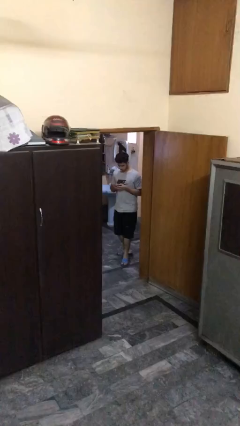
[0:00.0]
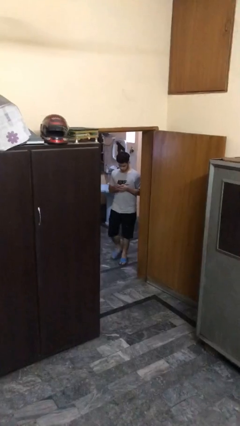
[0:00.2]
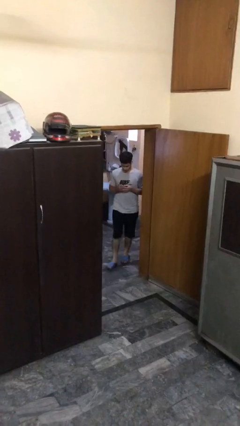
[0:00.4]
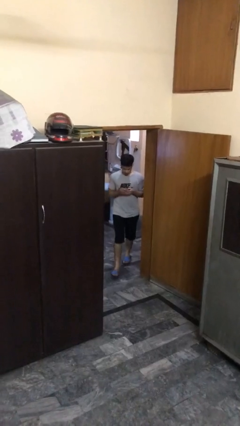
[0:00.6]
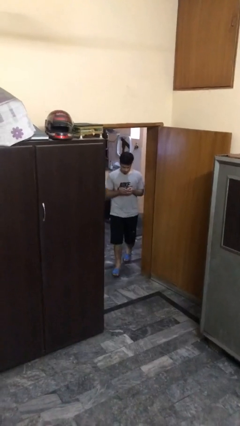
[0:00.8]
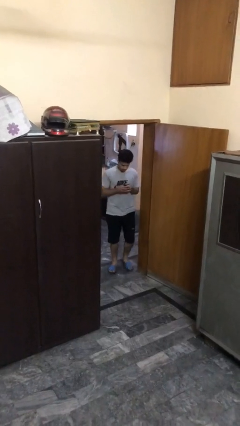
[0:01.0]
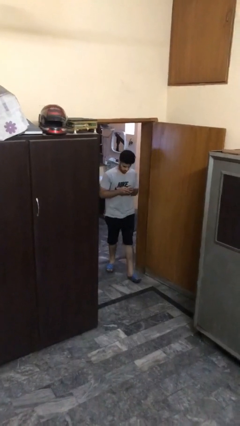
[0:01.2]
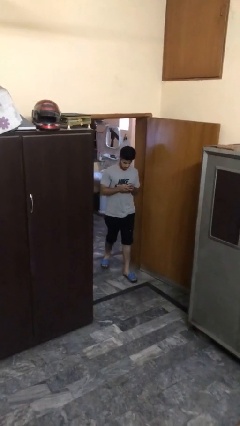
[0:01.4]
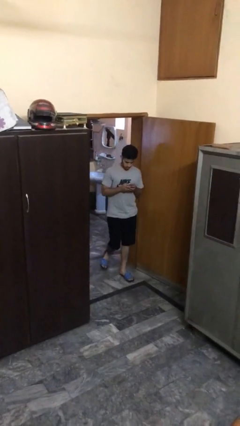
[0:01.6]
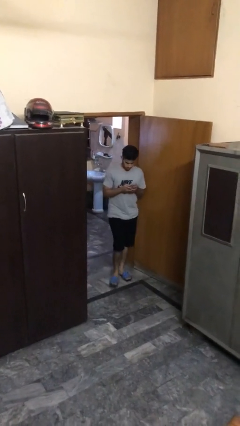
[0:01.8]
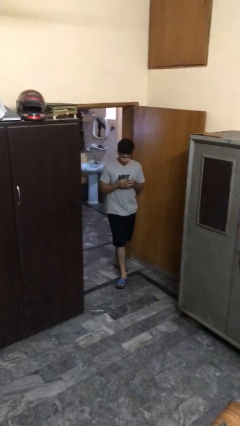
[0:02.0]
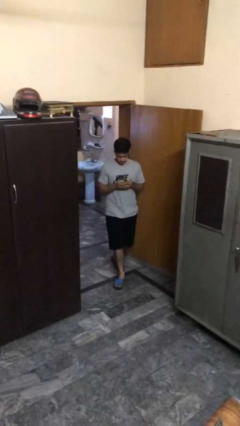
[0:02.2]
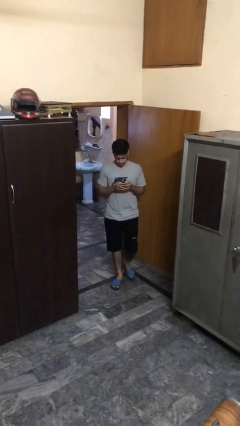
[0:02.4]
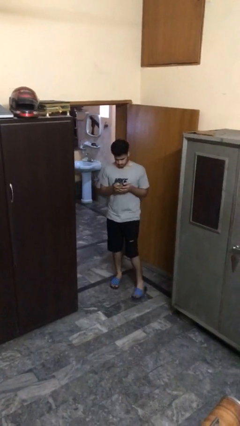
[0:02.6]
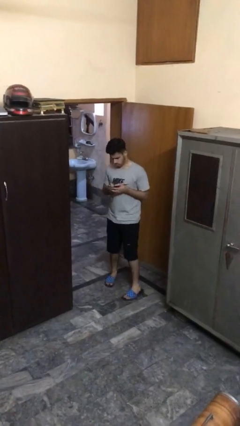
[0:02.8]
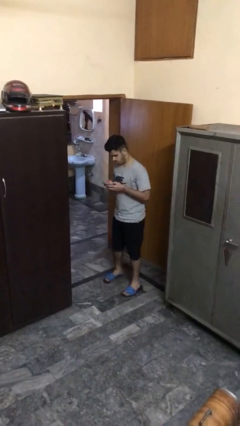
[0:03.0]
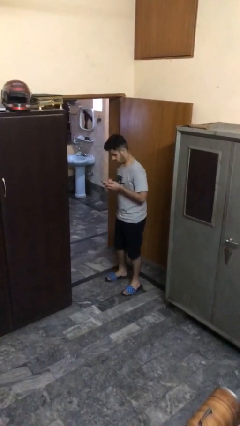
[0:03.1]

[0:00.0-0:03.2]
person enters scene through structure

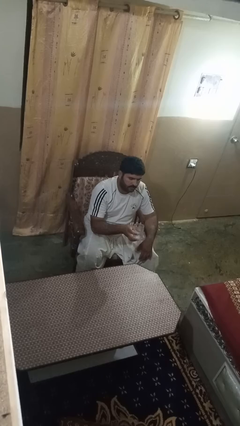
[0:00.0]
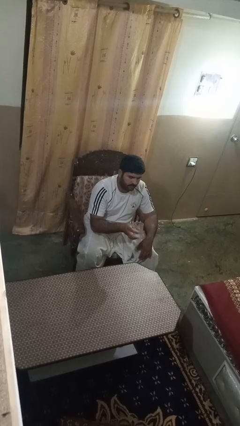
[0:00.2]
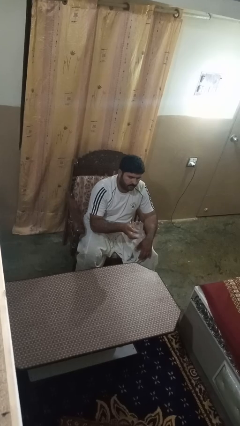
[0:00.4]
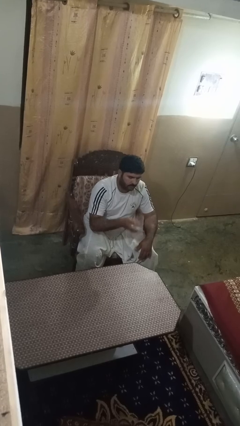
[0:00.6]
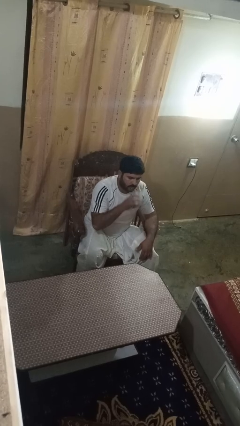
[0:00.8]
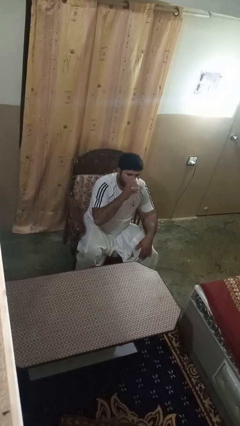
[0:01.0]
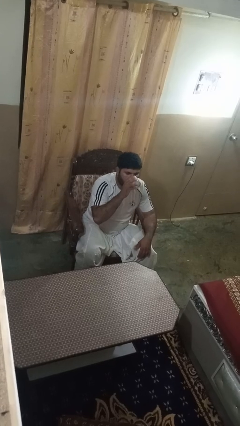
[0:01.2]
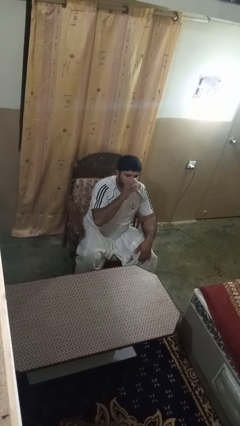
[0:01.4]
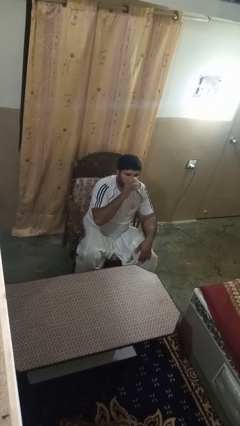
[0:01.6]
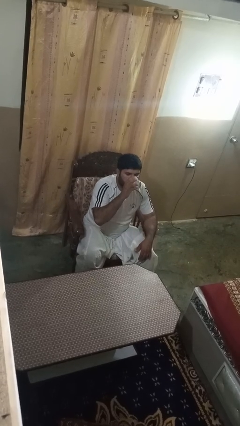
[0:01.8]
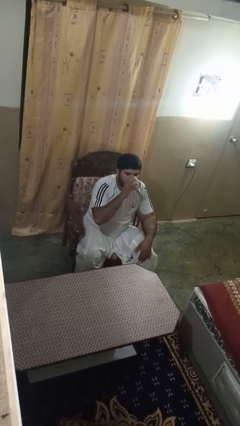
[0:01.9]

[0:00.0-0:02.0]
person drinks from shotglass

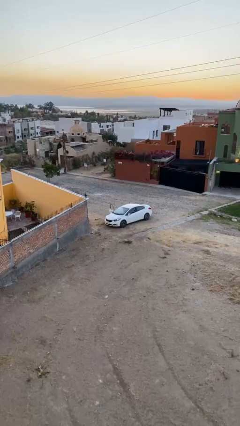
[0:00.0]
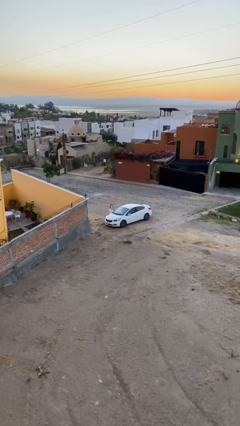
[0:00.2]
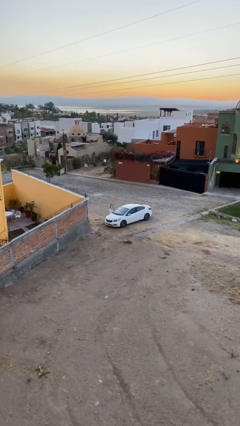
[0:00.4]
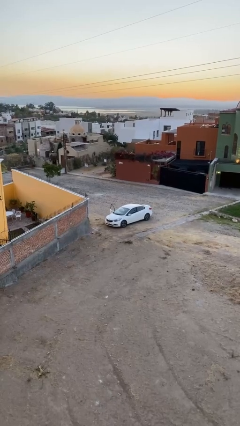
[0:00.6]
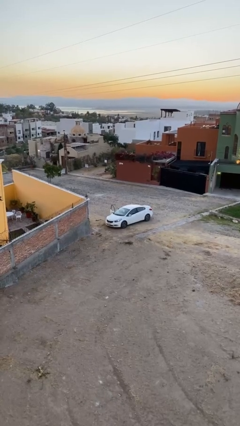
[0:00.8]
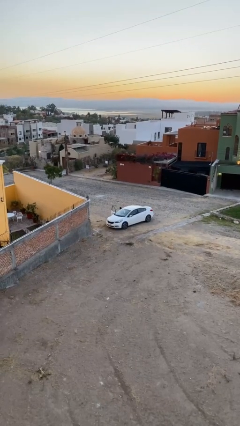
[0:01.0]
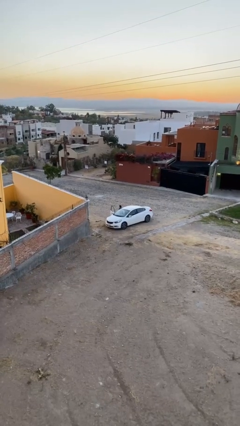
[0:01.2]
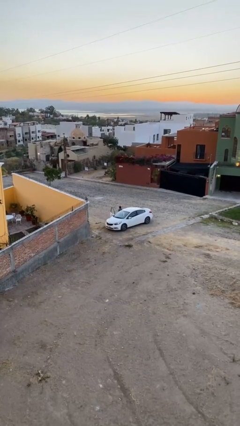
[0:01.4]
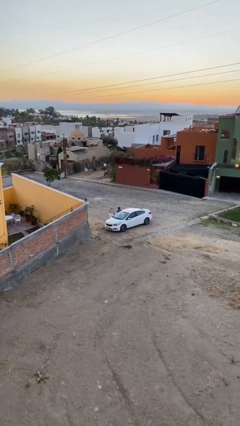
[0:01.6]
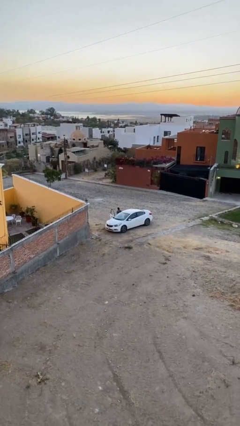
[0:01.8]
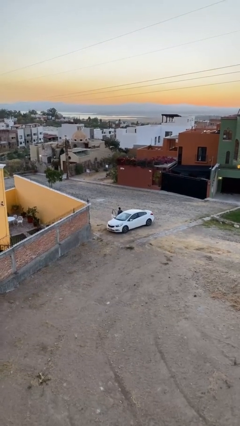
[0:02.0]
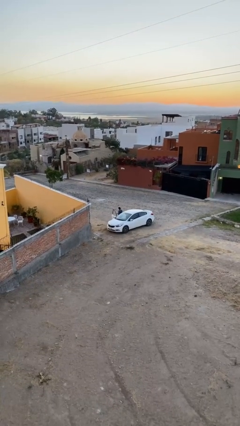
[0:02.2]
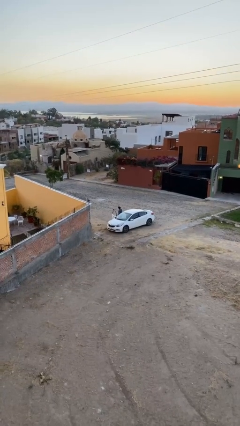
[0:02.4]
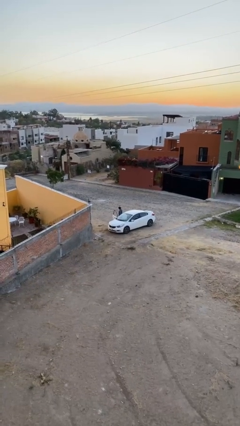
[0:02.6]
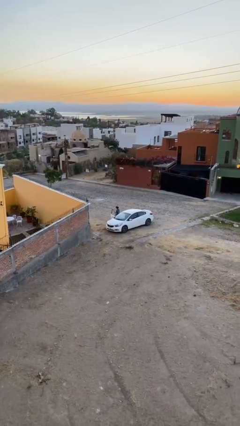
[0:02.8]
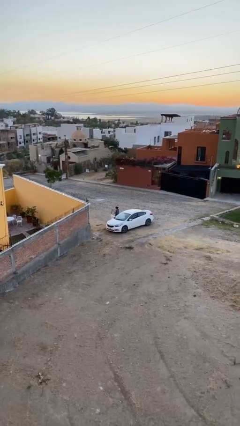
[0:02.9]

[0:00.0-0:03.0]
person exits car

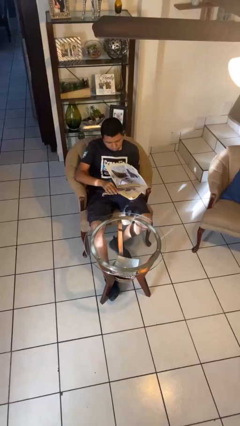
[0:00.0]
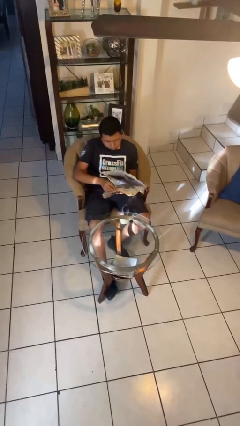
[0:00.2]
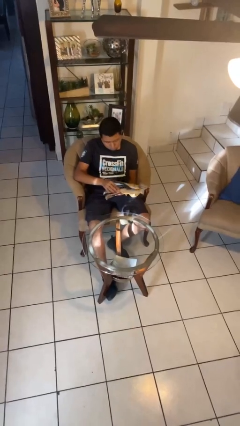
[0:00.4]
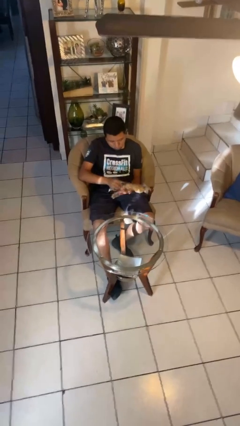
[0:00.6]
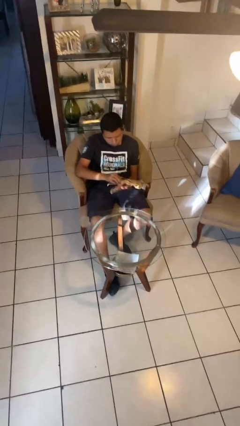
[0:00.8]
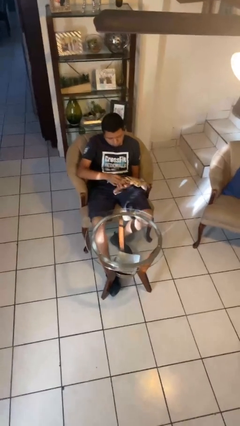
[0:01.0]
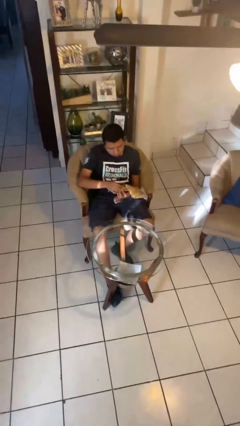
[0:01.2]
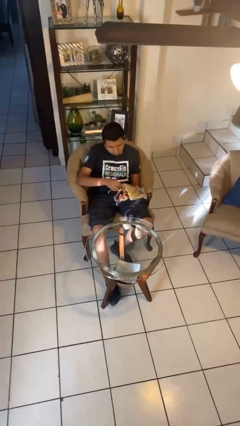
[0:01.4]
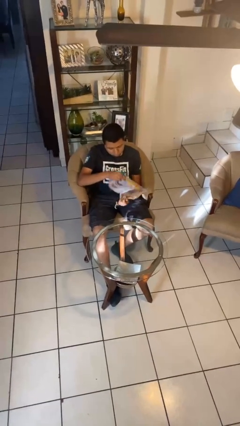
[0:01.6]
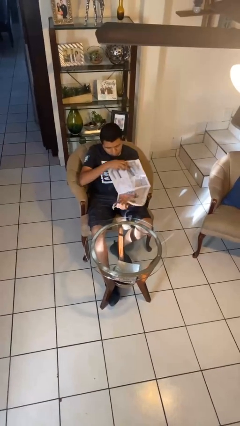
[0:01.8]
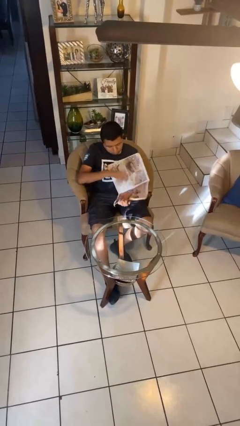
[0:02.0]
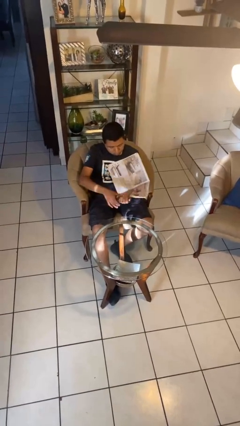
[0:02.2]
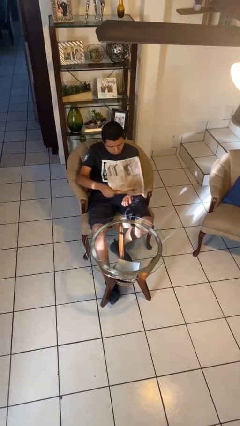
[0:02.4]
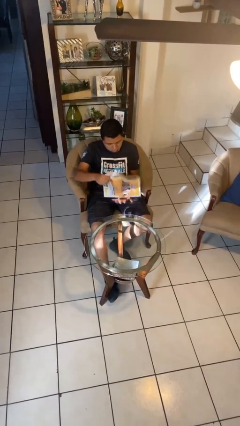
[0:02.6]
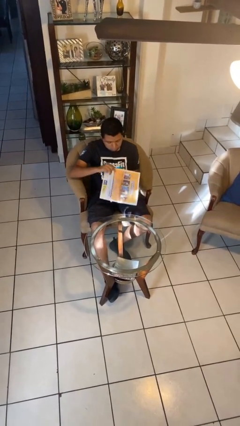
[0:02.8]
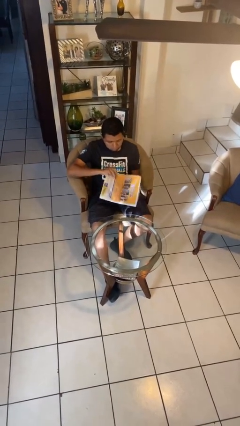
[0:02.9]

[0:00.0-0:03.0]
person reads newspaper

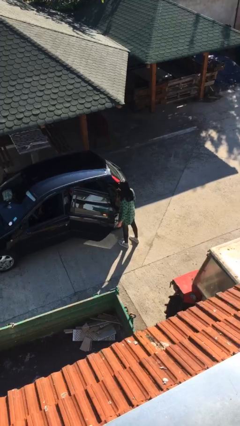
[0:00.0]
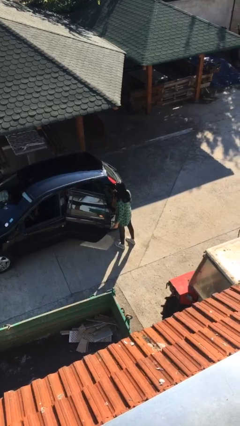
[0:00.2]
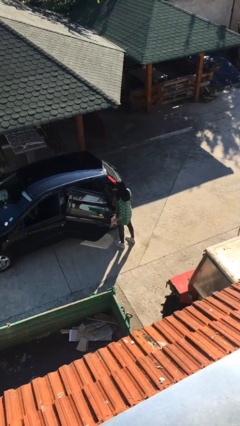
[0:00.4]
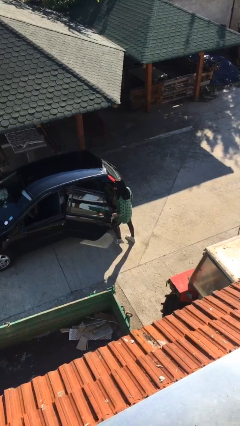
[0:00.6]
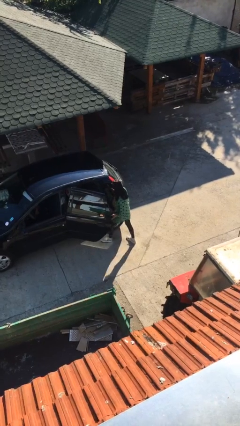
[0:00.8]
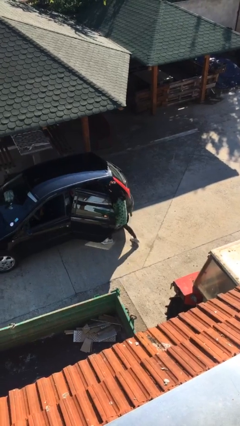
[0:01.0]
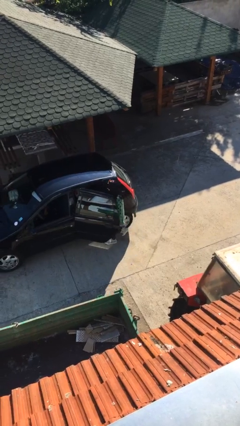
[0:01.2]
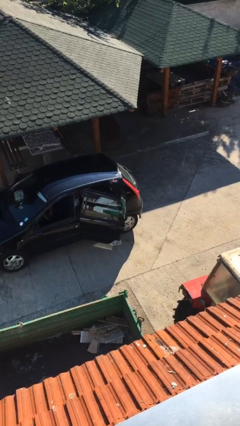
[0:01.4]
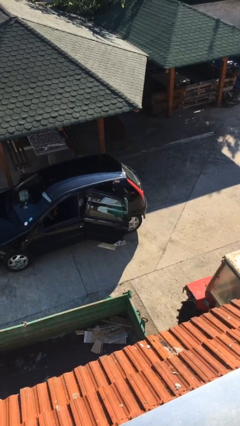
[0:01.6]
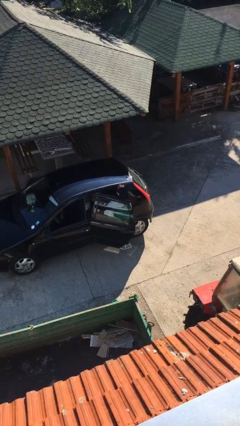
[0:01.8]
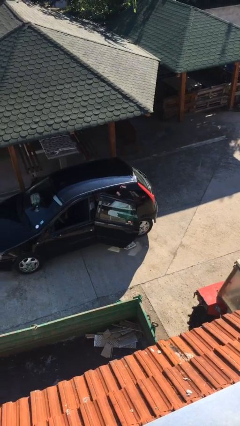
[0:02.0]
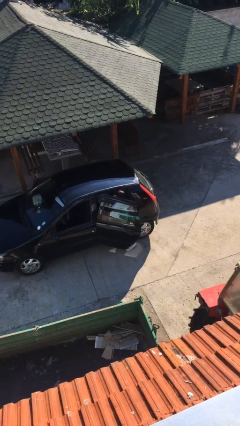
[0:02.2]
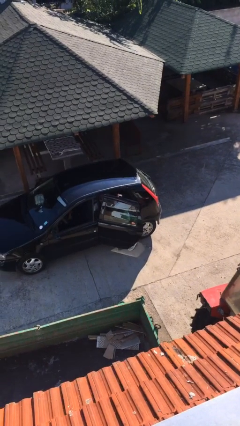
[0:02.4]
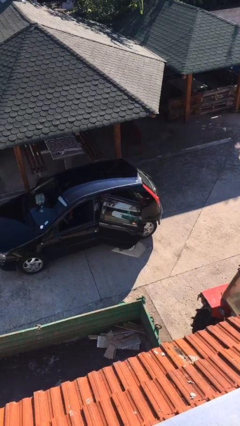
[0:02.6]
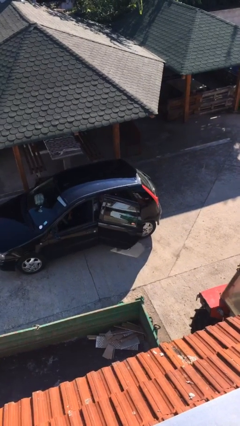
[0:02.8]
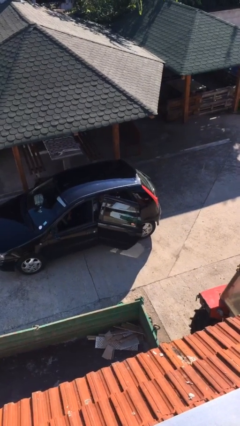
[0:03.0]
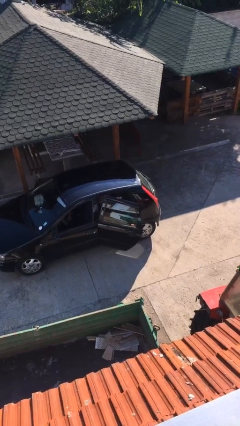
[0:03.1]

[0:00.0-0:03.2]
person enters car

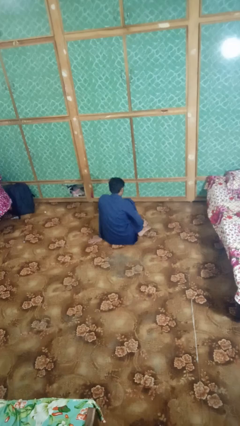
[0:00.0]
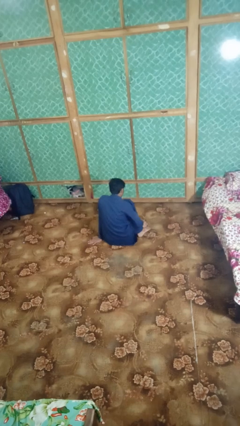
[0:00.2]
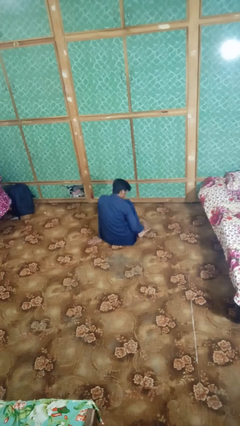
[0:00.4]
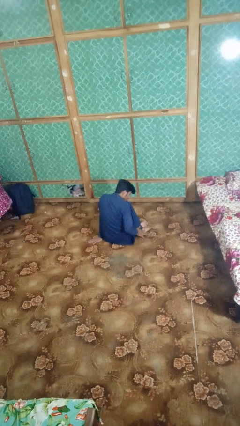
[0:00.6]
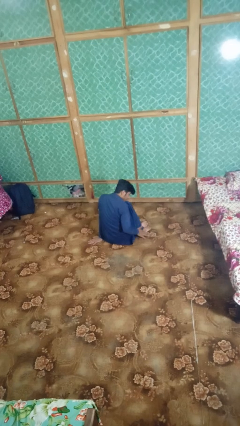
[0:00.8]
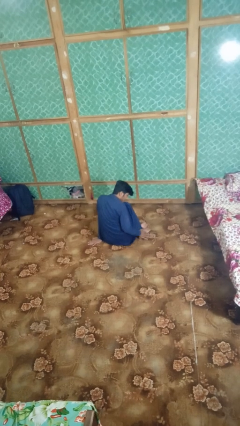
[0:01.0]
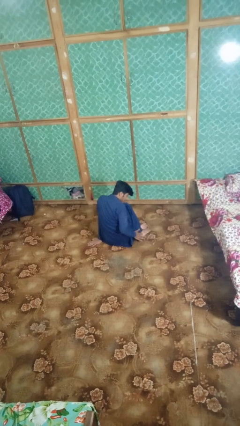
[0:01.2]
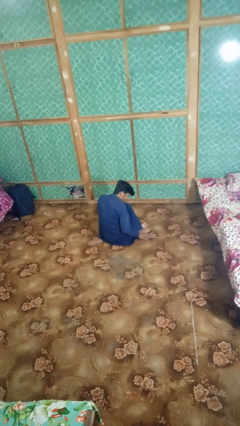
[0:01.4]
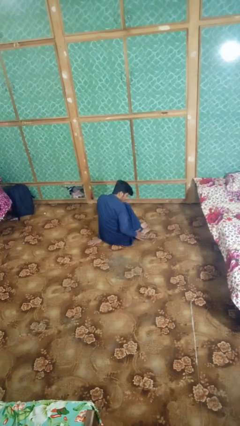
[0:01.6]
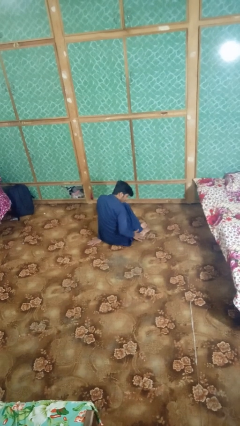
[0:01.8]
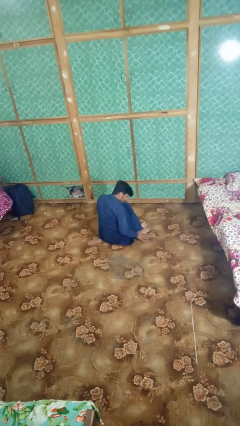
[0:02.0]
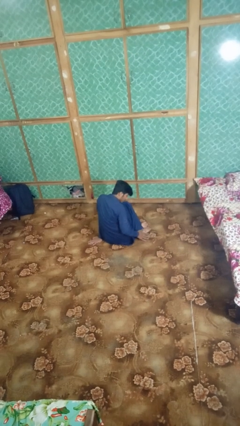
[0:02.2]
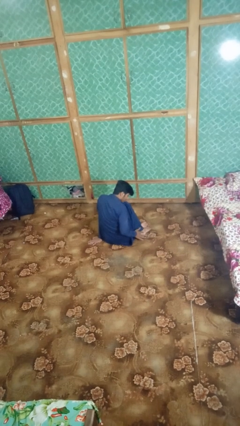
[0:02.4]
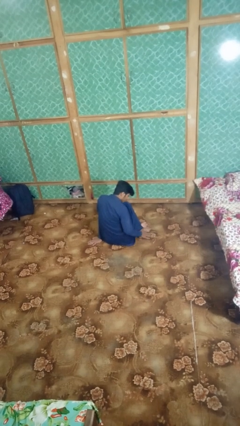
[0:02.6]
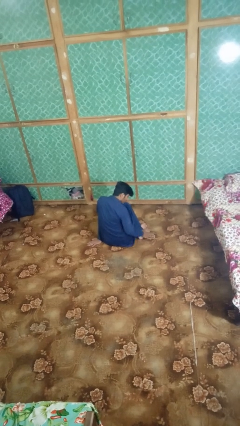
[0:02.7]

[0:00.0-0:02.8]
person rubs foot
